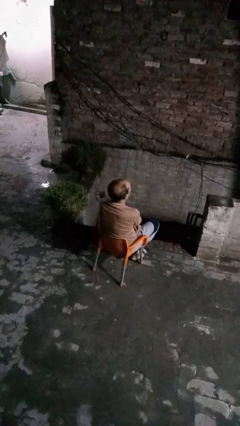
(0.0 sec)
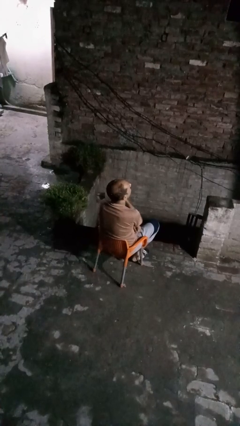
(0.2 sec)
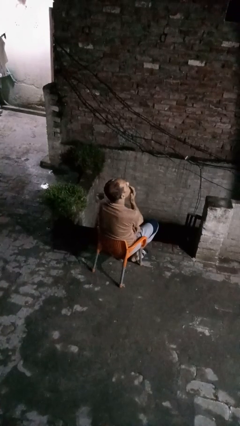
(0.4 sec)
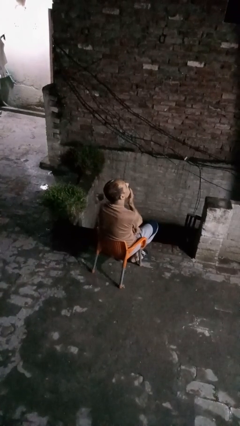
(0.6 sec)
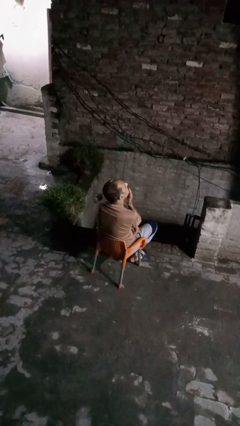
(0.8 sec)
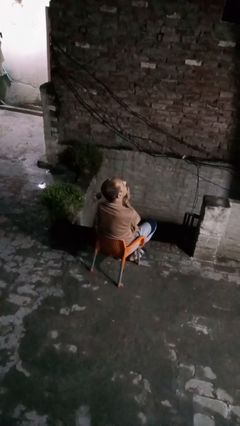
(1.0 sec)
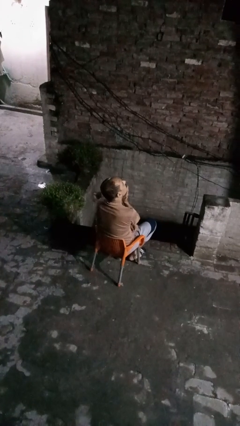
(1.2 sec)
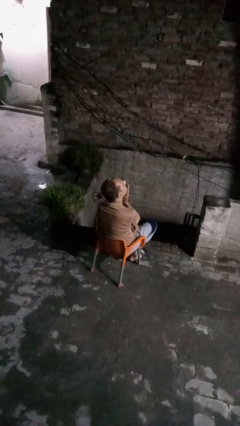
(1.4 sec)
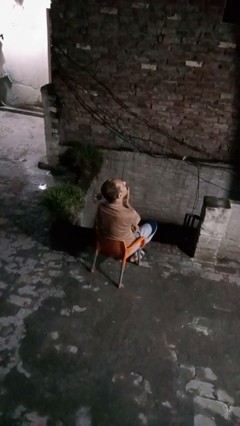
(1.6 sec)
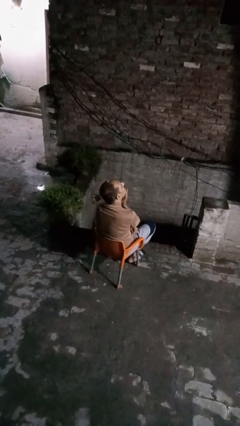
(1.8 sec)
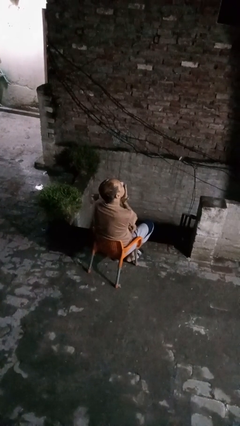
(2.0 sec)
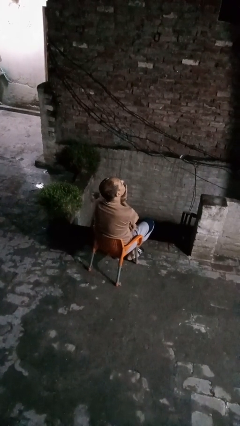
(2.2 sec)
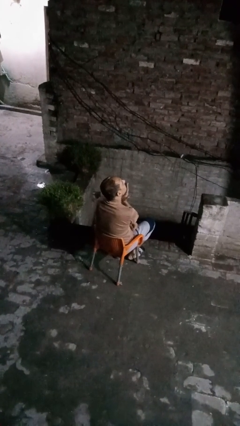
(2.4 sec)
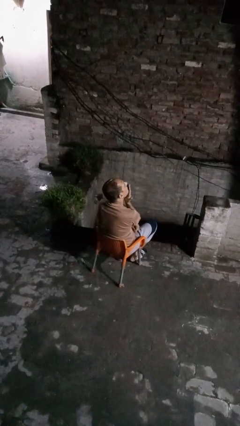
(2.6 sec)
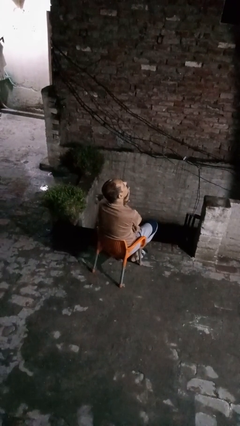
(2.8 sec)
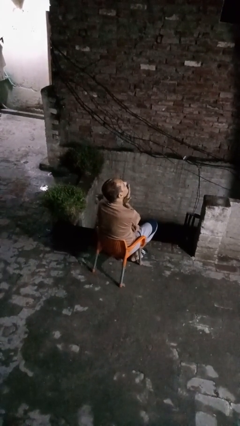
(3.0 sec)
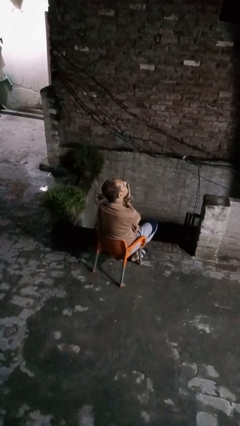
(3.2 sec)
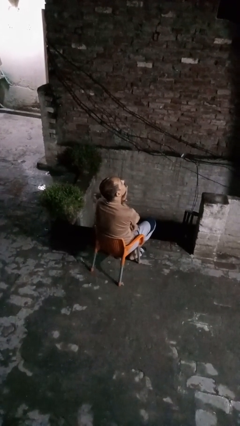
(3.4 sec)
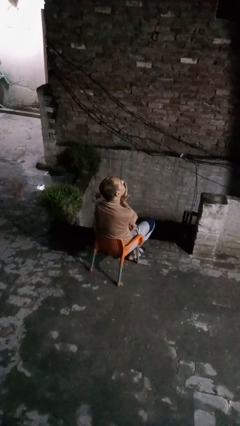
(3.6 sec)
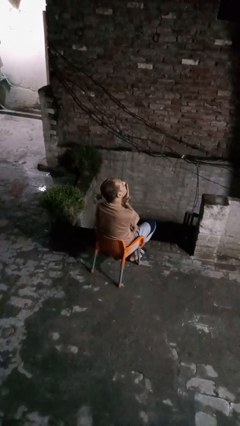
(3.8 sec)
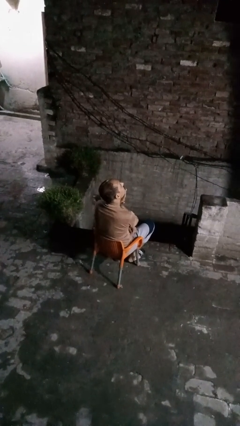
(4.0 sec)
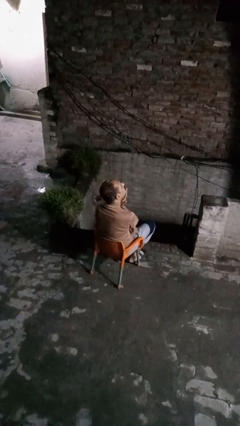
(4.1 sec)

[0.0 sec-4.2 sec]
person strokes chin

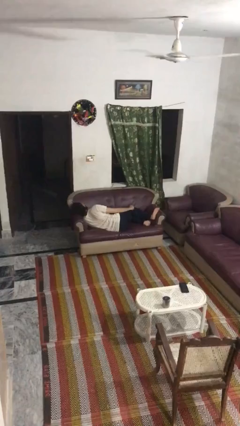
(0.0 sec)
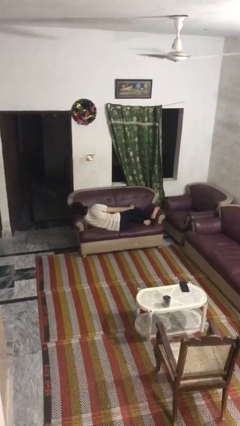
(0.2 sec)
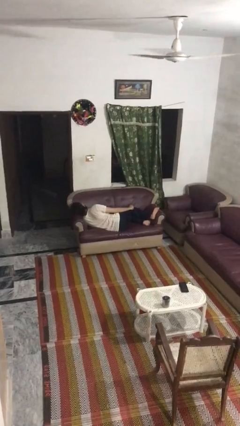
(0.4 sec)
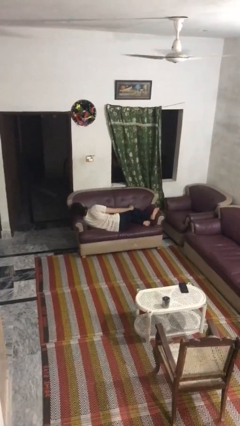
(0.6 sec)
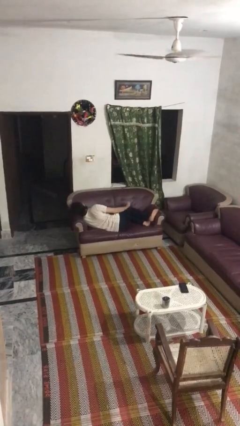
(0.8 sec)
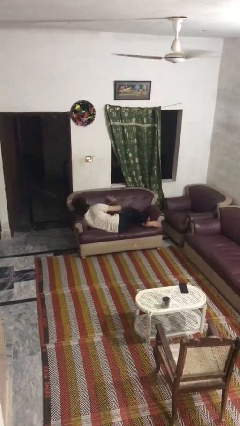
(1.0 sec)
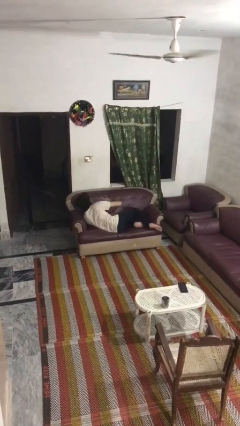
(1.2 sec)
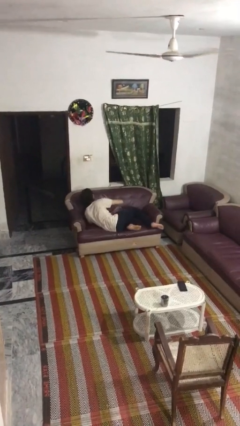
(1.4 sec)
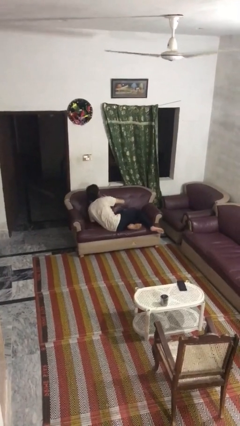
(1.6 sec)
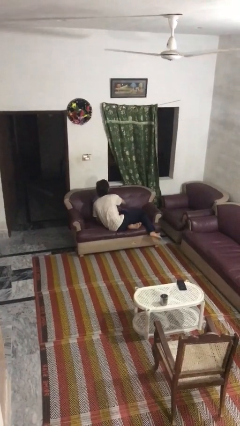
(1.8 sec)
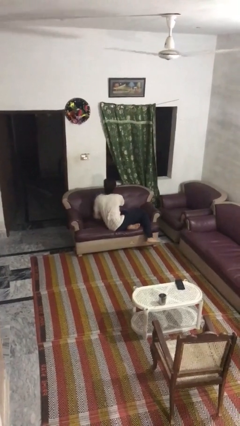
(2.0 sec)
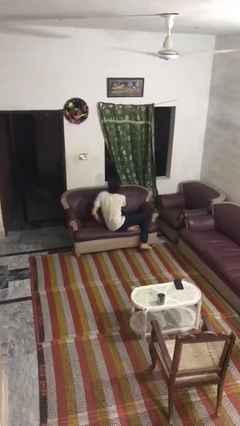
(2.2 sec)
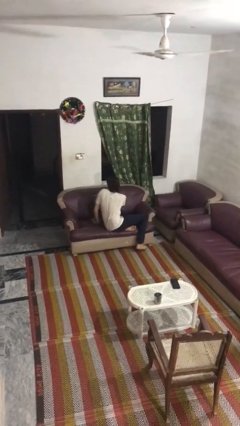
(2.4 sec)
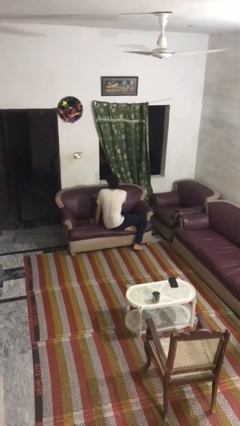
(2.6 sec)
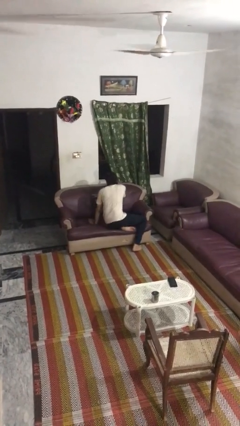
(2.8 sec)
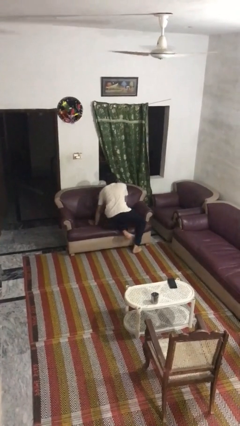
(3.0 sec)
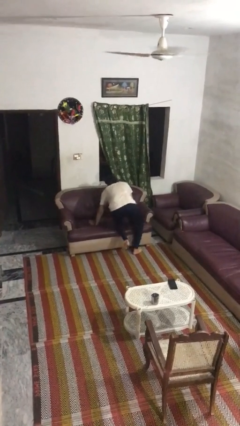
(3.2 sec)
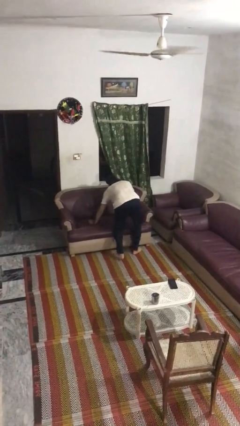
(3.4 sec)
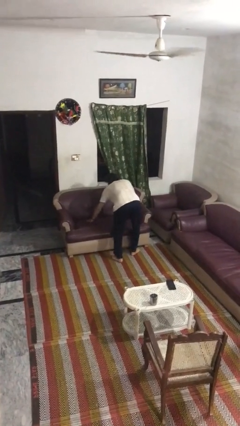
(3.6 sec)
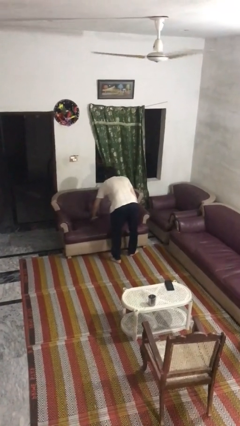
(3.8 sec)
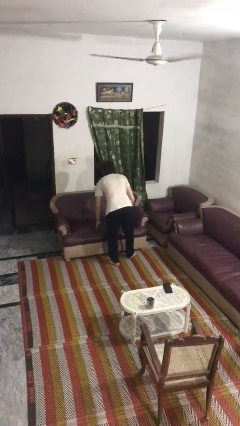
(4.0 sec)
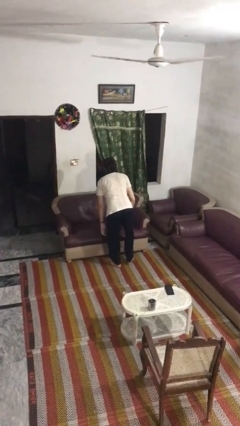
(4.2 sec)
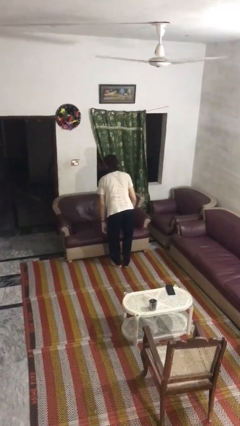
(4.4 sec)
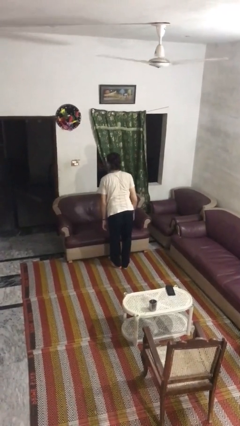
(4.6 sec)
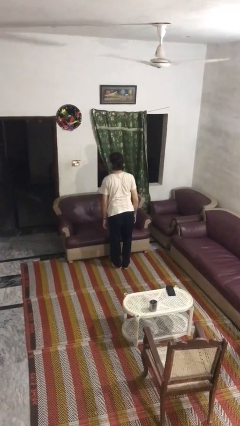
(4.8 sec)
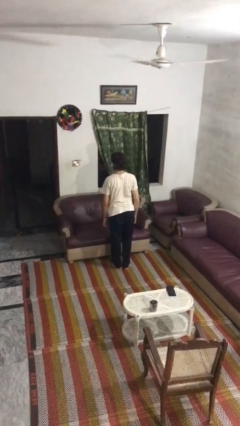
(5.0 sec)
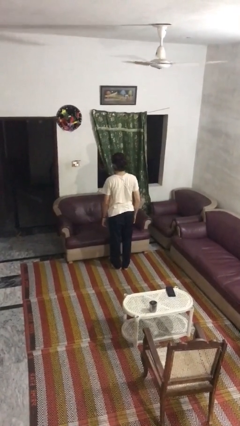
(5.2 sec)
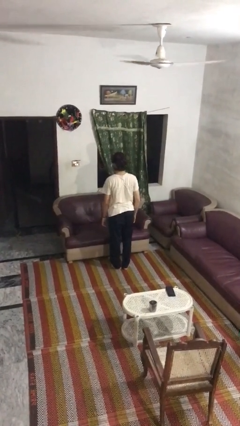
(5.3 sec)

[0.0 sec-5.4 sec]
person stands up

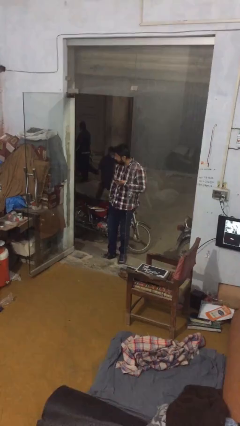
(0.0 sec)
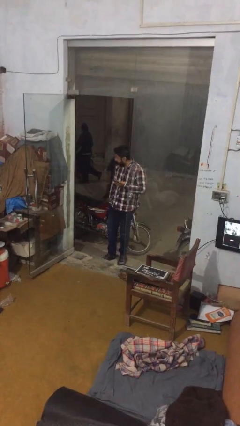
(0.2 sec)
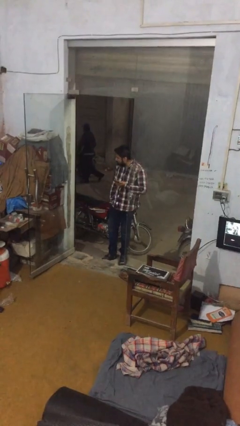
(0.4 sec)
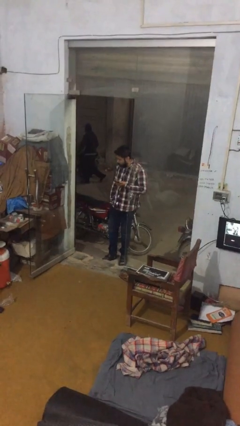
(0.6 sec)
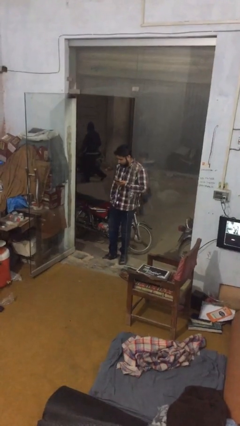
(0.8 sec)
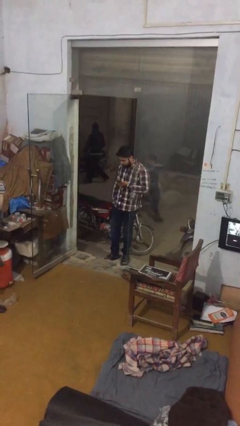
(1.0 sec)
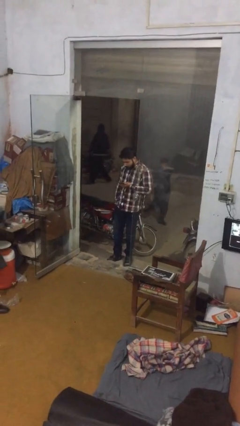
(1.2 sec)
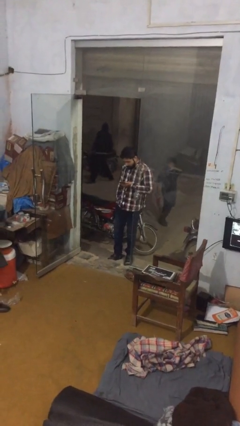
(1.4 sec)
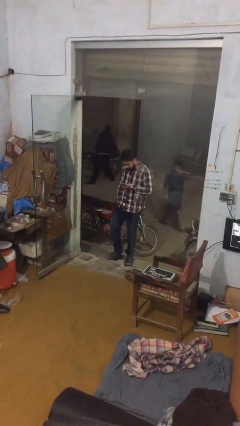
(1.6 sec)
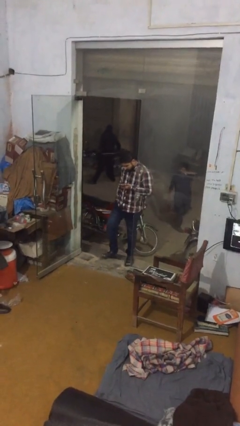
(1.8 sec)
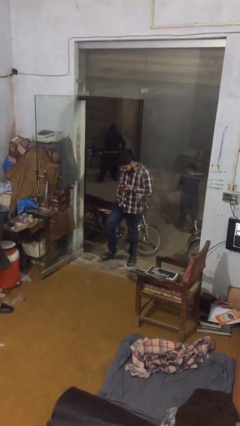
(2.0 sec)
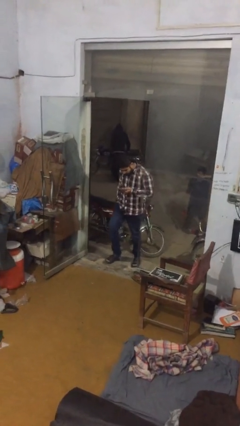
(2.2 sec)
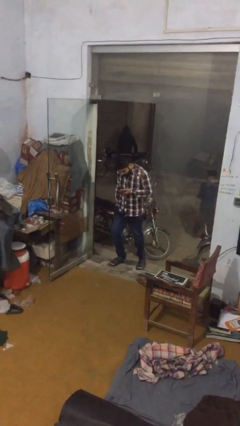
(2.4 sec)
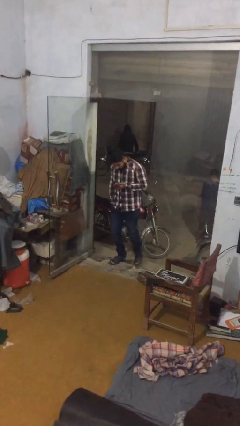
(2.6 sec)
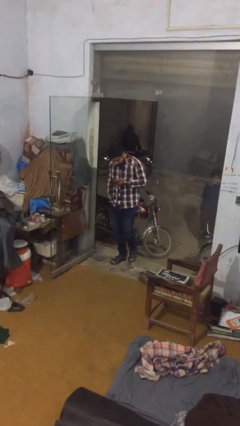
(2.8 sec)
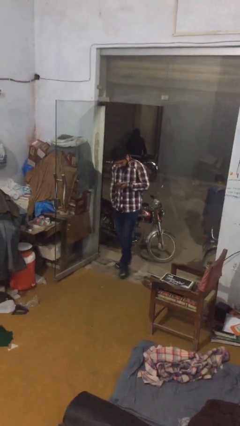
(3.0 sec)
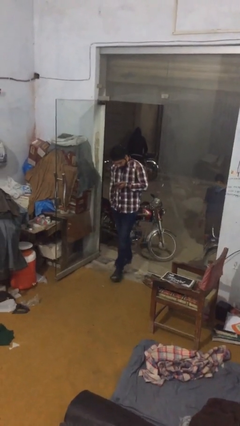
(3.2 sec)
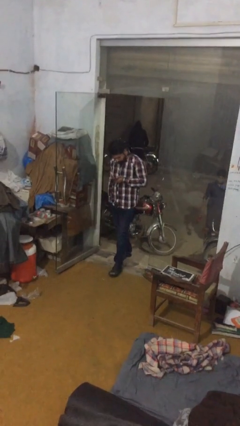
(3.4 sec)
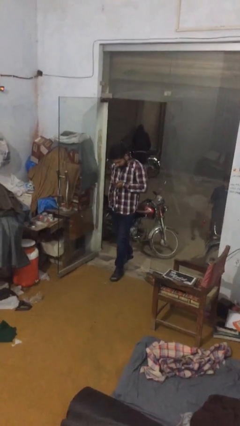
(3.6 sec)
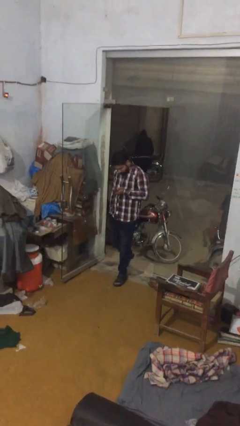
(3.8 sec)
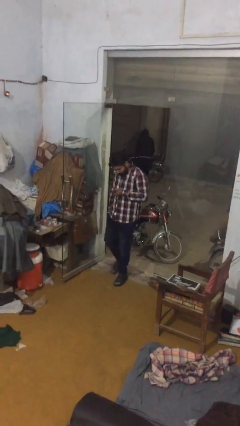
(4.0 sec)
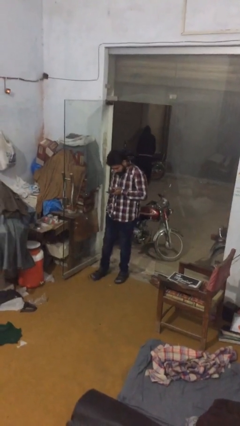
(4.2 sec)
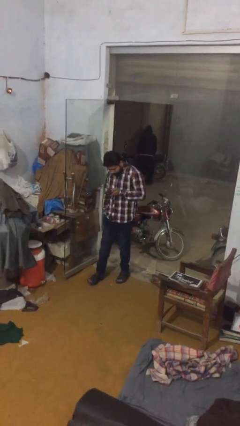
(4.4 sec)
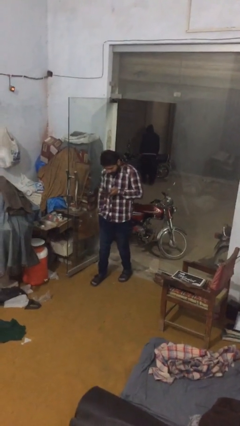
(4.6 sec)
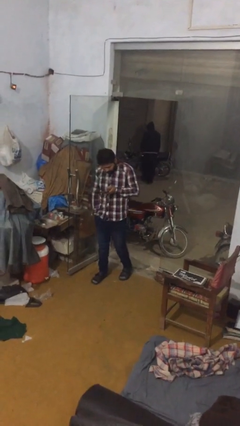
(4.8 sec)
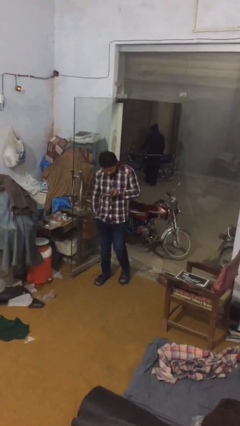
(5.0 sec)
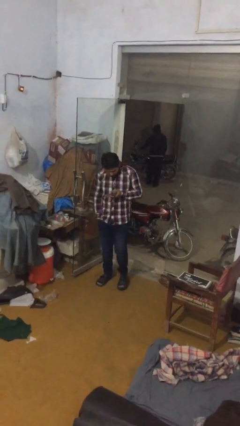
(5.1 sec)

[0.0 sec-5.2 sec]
person enters scene through structure

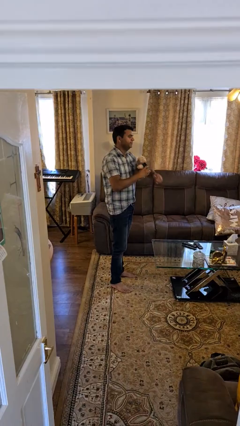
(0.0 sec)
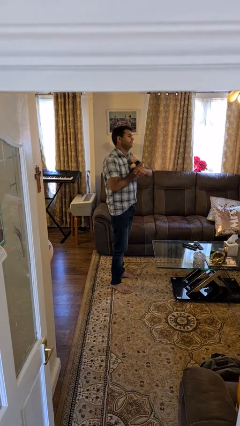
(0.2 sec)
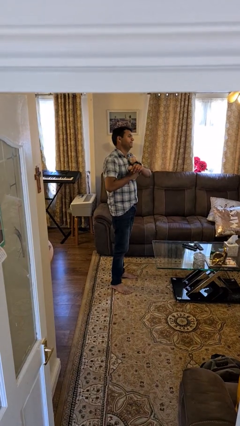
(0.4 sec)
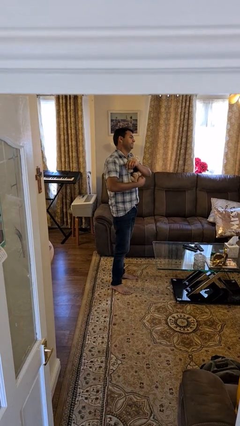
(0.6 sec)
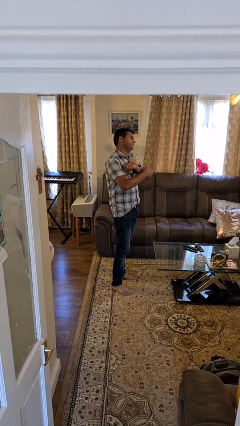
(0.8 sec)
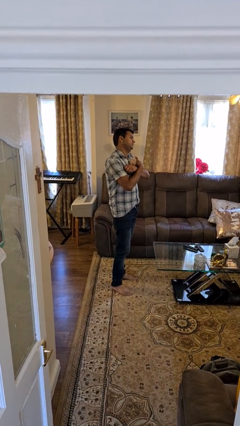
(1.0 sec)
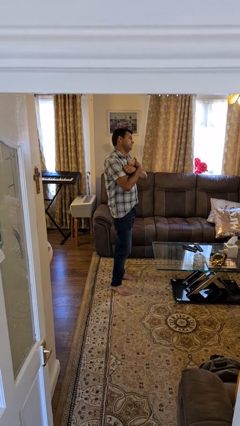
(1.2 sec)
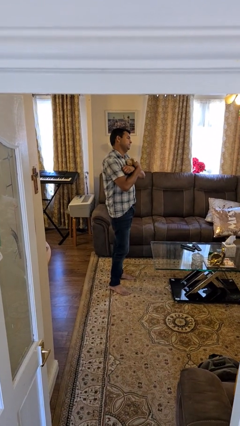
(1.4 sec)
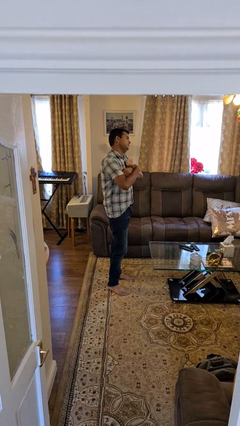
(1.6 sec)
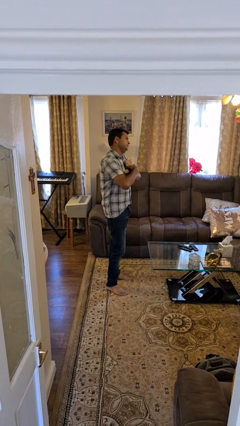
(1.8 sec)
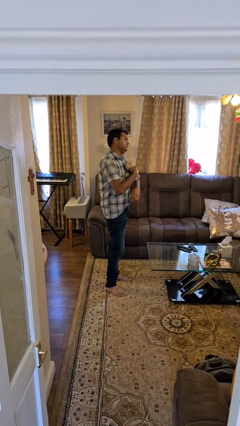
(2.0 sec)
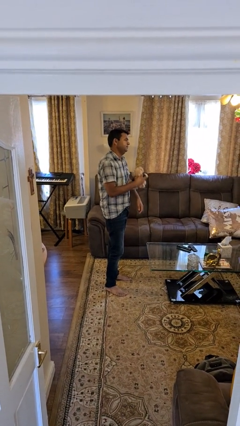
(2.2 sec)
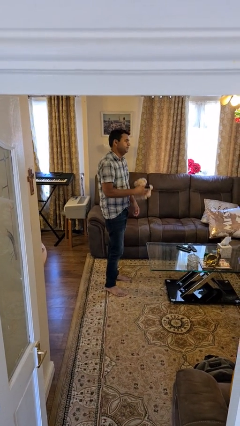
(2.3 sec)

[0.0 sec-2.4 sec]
person hugs stuffed animal

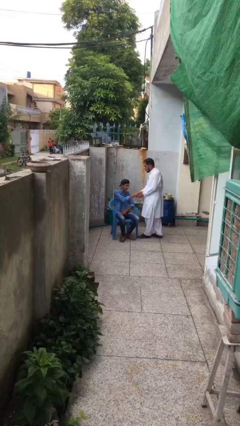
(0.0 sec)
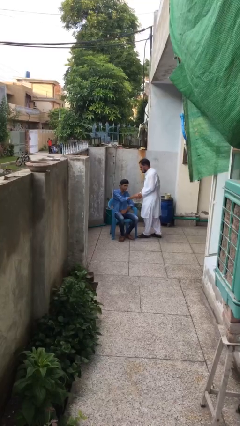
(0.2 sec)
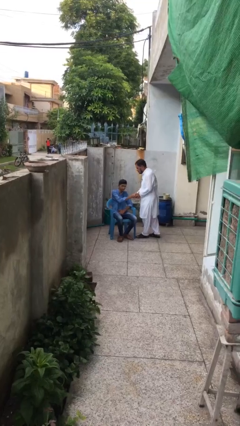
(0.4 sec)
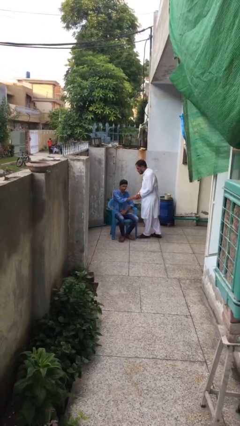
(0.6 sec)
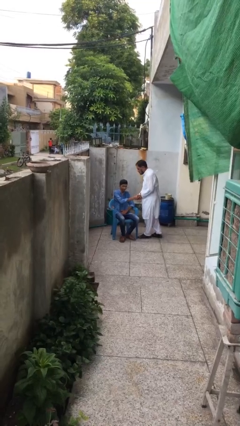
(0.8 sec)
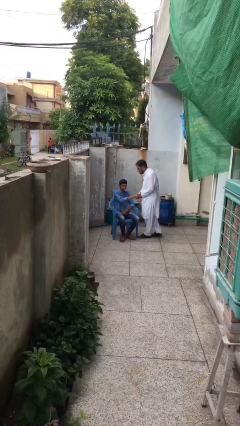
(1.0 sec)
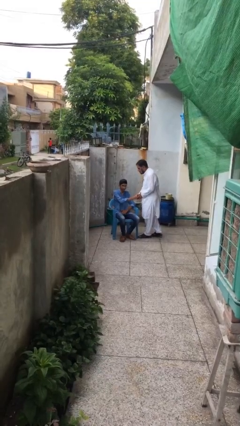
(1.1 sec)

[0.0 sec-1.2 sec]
person shakes hand
